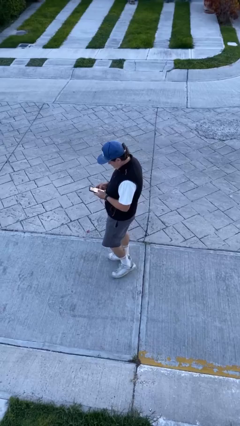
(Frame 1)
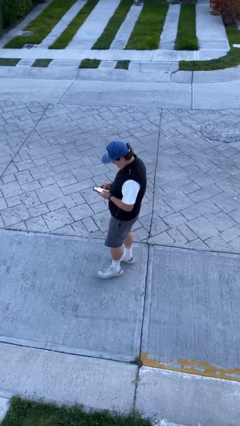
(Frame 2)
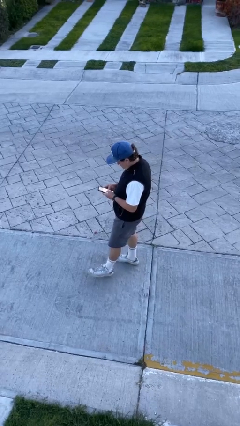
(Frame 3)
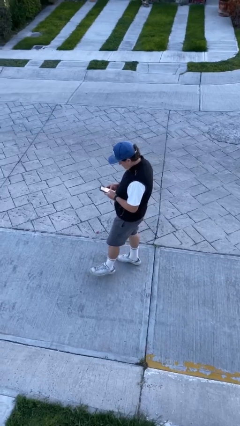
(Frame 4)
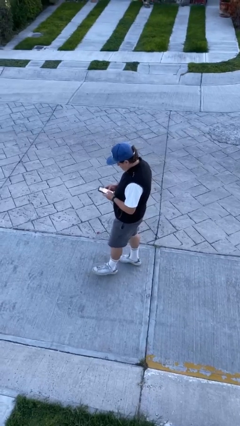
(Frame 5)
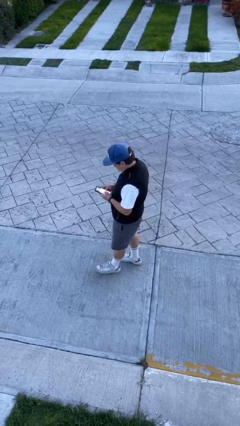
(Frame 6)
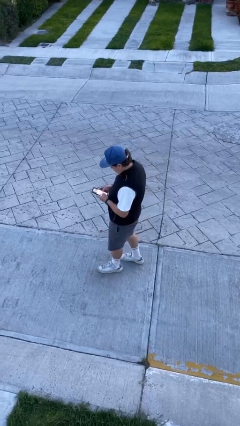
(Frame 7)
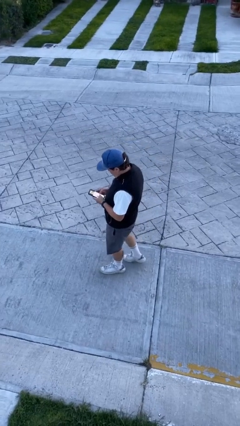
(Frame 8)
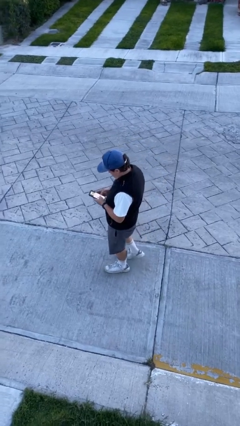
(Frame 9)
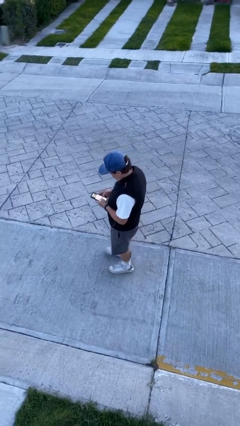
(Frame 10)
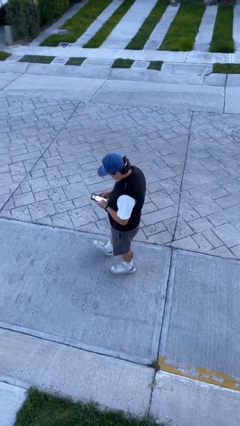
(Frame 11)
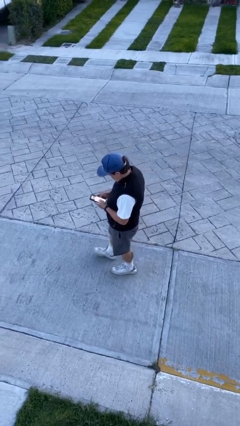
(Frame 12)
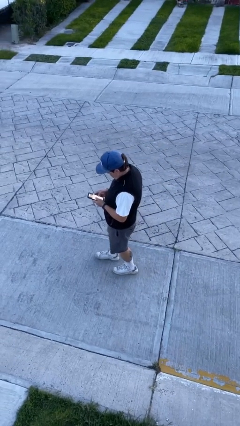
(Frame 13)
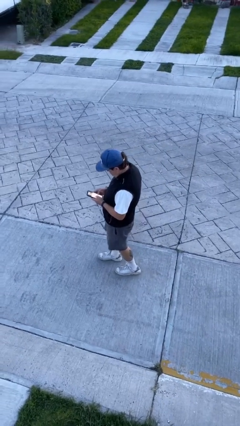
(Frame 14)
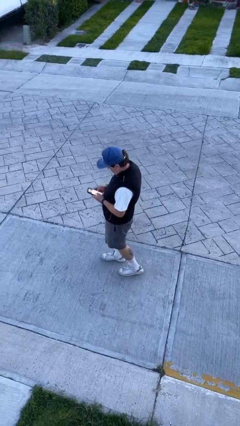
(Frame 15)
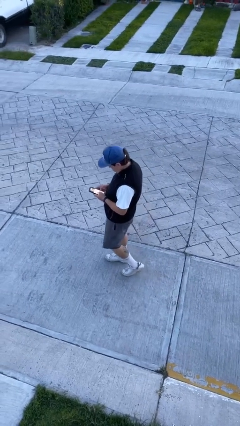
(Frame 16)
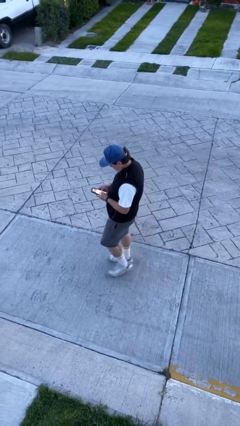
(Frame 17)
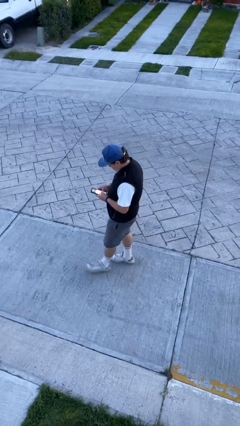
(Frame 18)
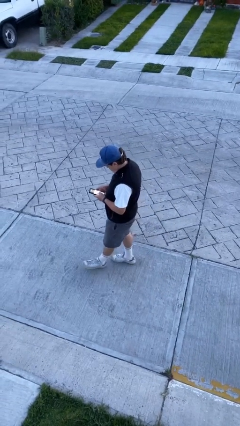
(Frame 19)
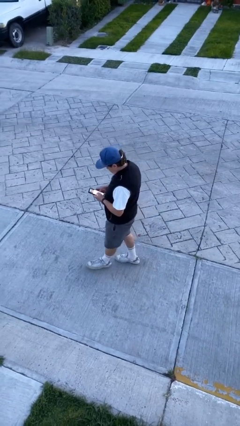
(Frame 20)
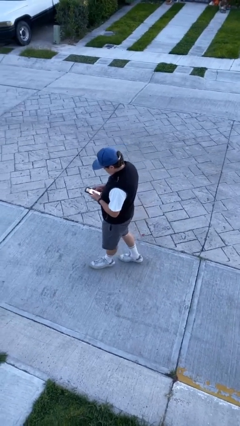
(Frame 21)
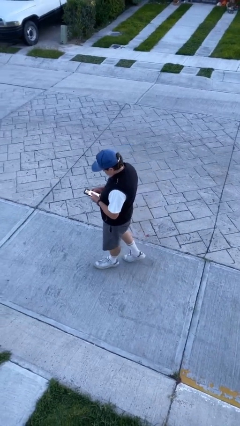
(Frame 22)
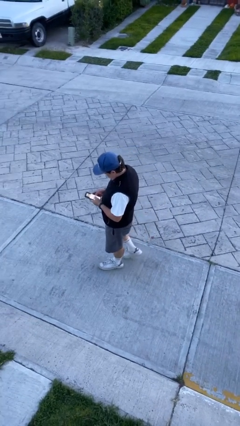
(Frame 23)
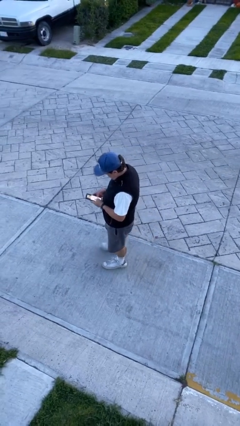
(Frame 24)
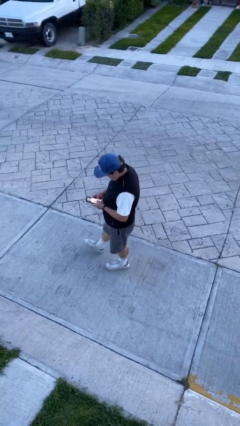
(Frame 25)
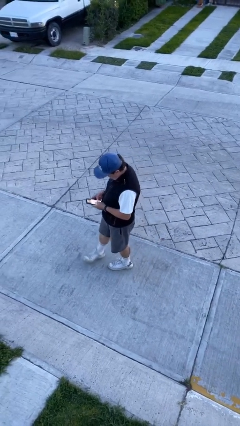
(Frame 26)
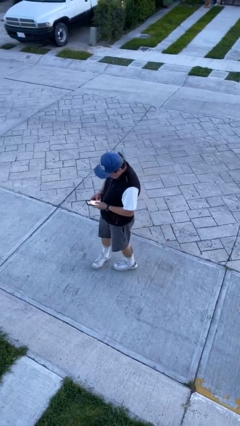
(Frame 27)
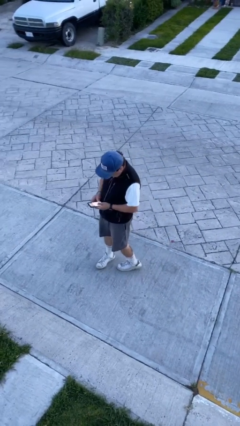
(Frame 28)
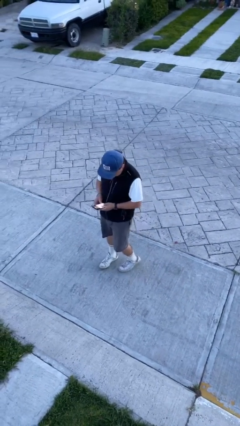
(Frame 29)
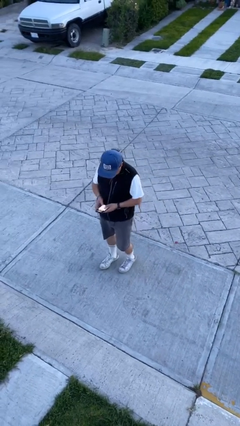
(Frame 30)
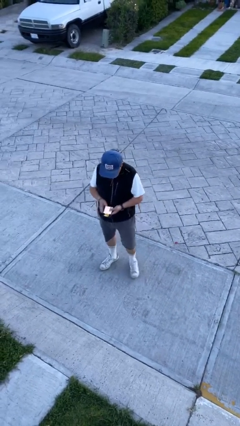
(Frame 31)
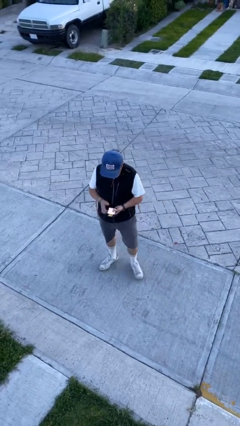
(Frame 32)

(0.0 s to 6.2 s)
person texts on phone

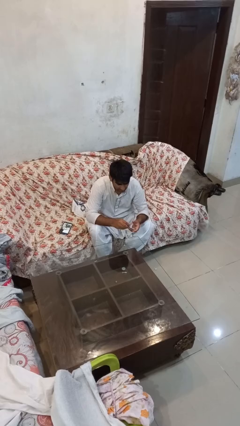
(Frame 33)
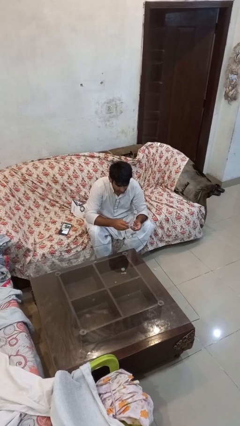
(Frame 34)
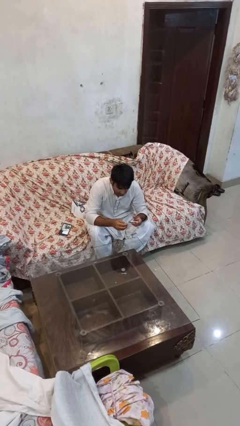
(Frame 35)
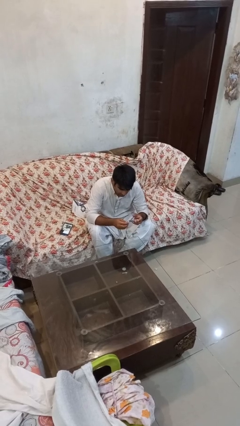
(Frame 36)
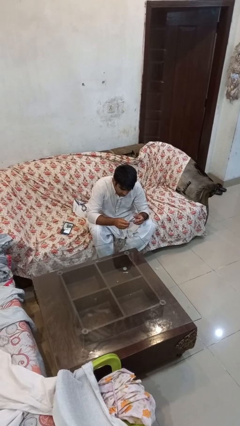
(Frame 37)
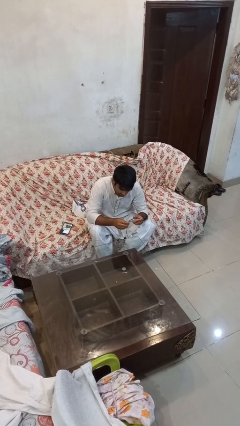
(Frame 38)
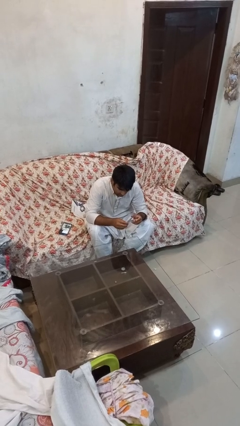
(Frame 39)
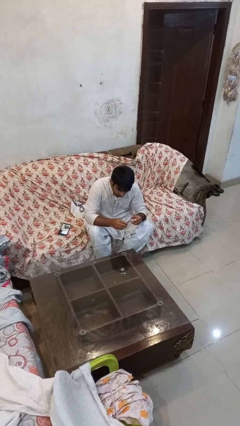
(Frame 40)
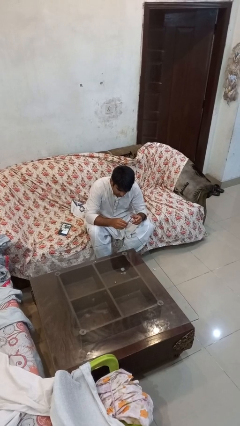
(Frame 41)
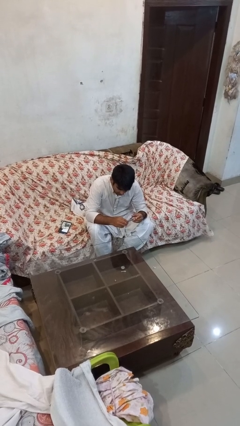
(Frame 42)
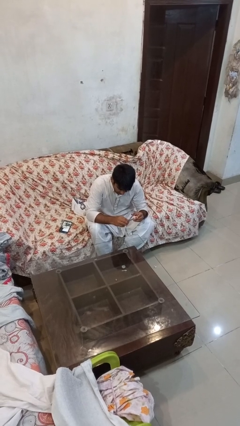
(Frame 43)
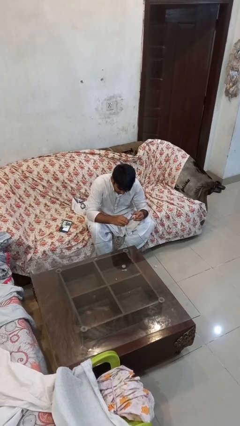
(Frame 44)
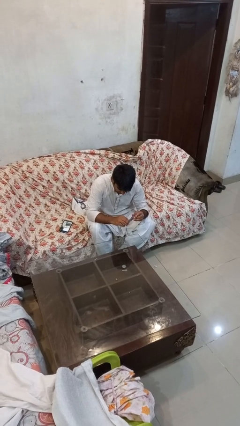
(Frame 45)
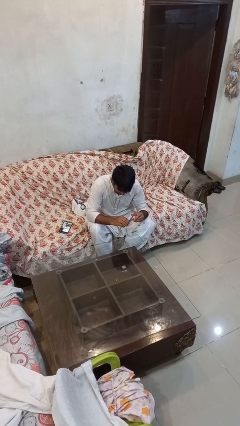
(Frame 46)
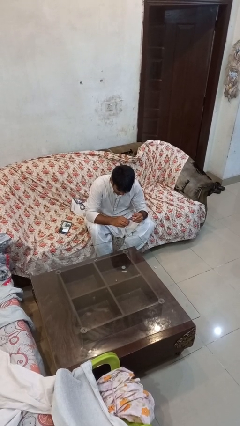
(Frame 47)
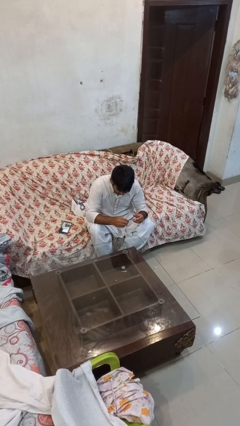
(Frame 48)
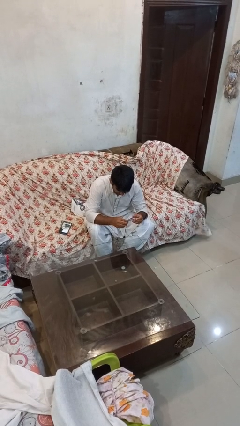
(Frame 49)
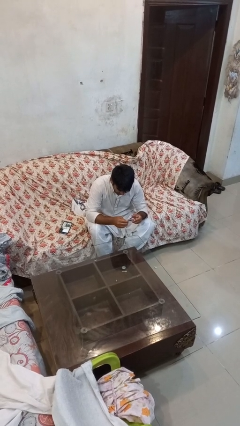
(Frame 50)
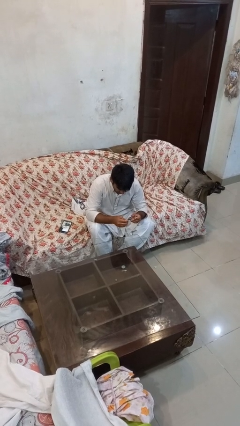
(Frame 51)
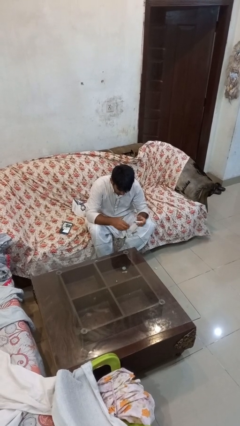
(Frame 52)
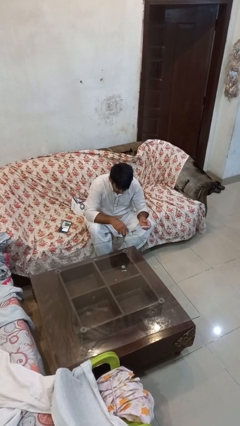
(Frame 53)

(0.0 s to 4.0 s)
person clips fingernails

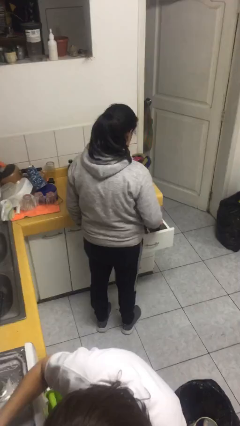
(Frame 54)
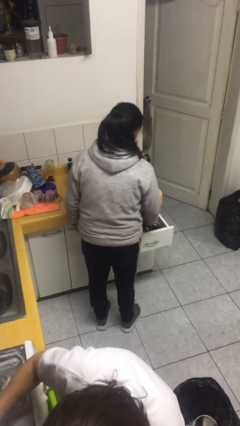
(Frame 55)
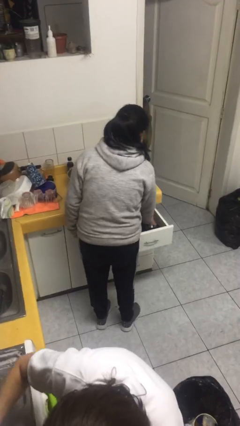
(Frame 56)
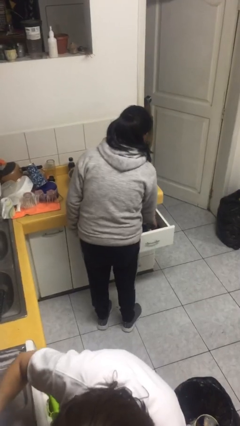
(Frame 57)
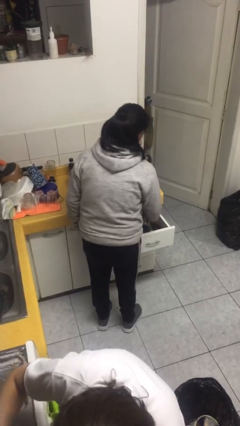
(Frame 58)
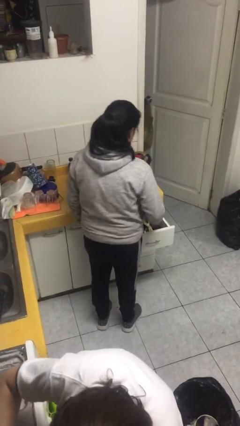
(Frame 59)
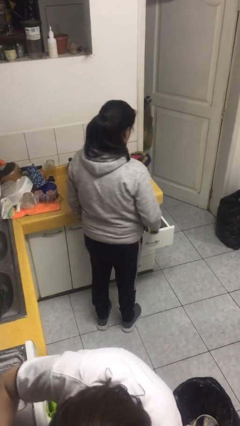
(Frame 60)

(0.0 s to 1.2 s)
person puts object into kitchen drawer

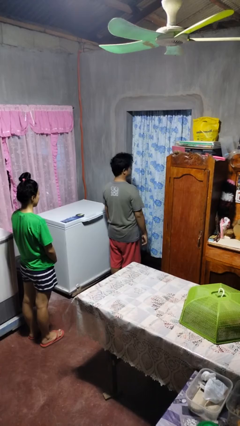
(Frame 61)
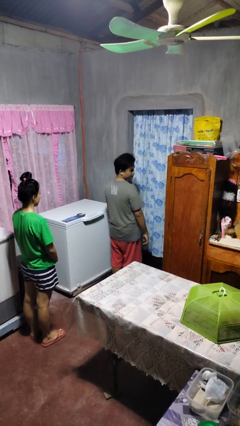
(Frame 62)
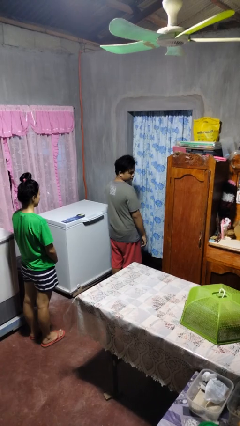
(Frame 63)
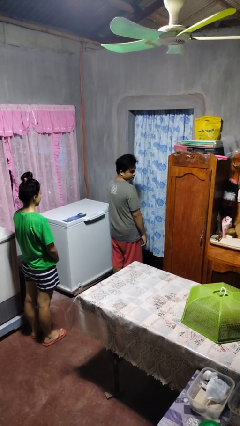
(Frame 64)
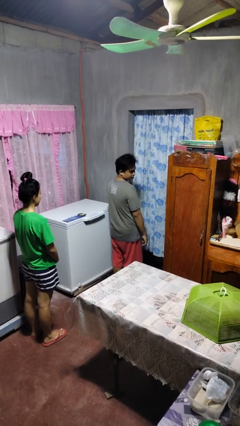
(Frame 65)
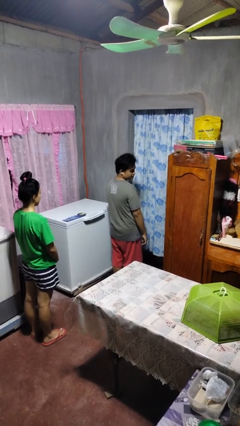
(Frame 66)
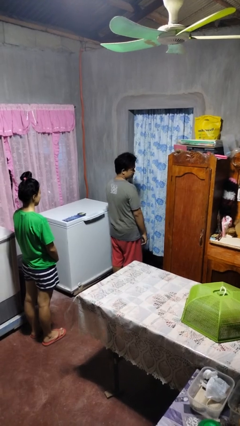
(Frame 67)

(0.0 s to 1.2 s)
person looks over shoulder

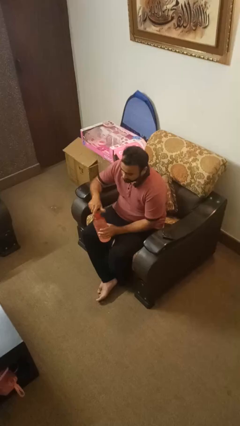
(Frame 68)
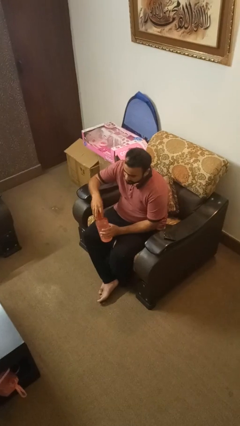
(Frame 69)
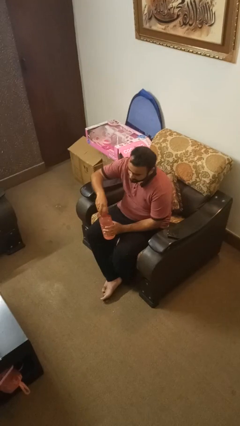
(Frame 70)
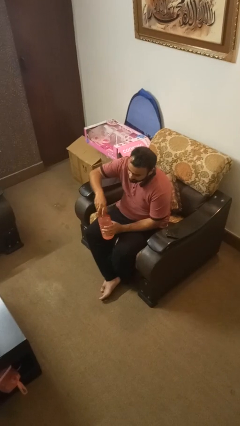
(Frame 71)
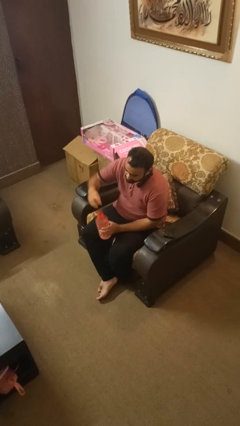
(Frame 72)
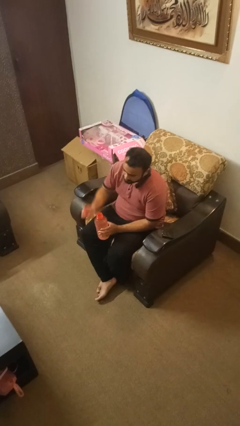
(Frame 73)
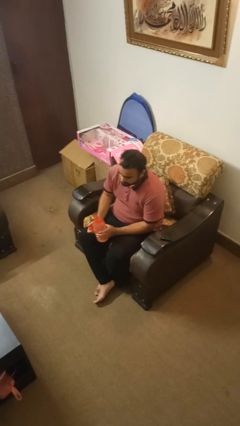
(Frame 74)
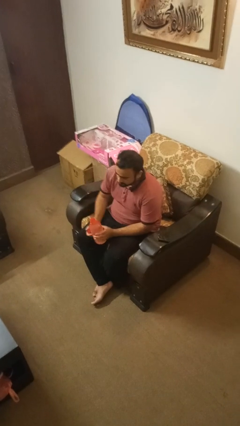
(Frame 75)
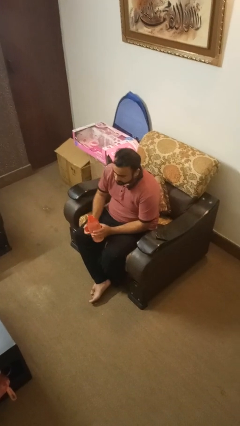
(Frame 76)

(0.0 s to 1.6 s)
person unscrews lid from bottle

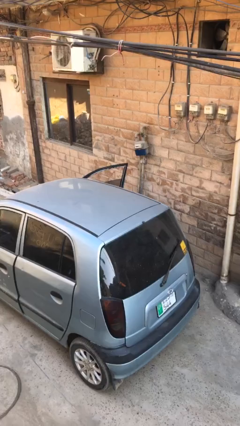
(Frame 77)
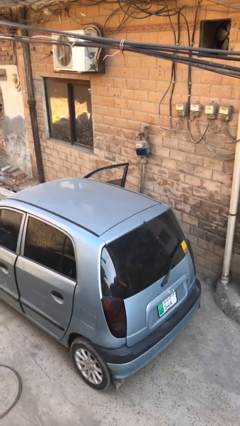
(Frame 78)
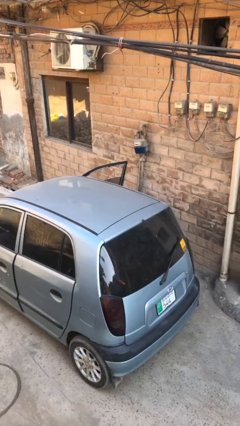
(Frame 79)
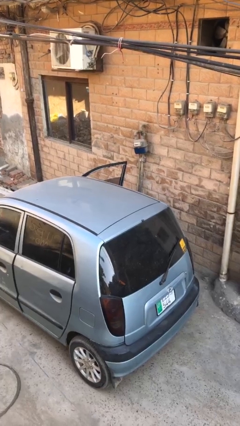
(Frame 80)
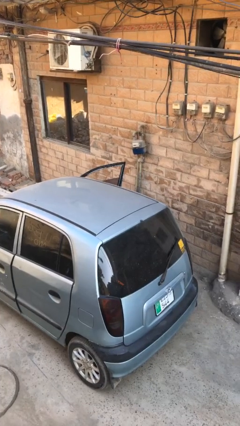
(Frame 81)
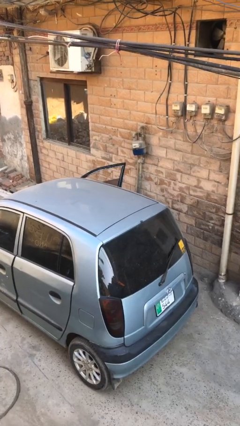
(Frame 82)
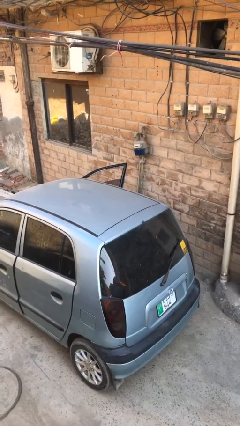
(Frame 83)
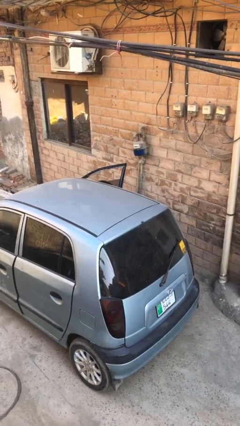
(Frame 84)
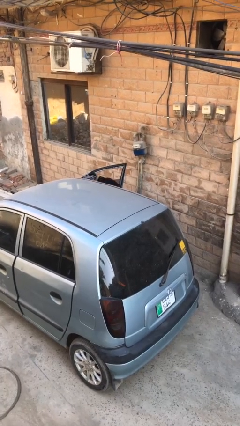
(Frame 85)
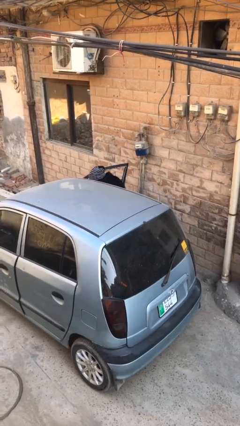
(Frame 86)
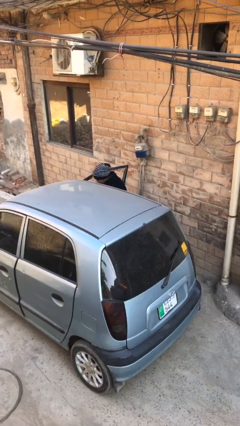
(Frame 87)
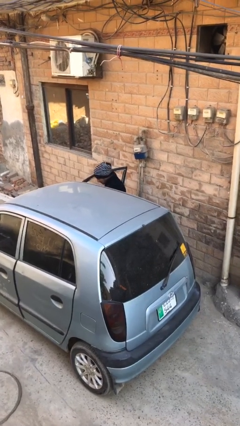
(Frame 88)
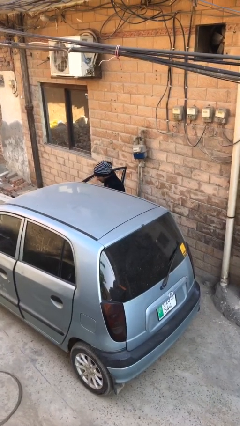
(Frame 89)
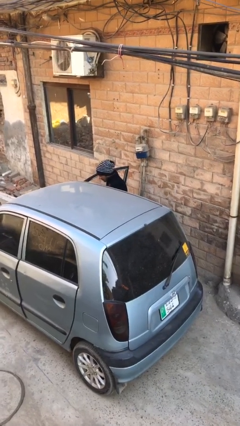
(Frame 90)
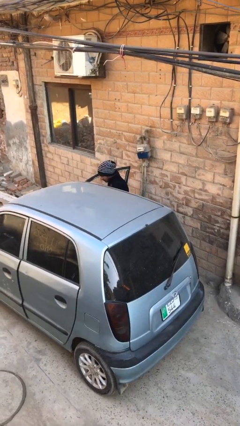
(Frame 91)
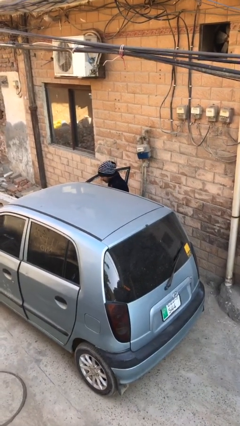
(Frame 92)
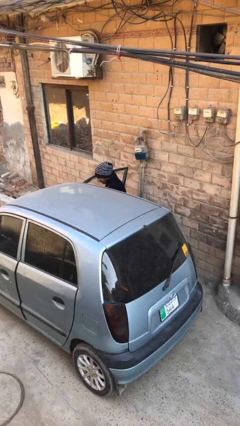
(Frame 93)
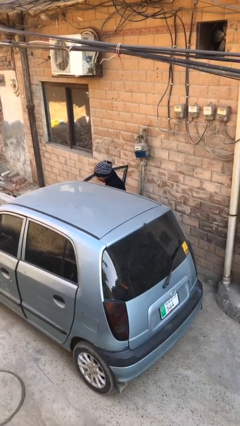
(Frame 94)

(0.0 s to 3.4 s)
person exits car
